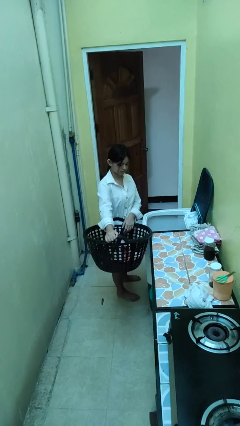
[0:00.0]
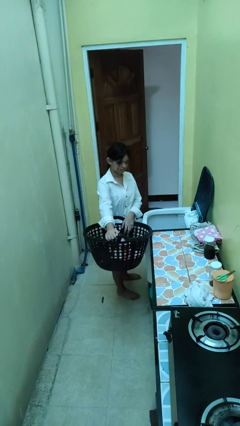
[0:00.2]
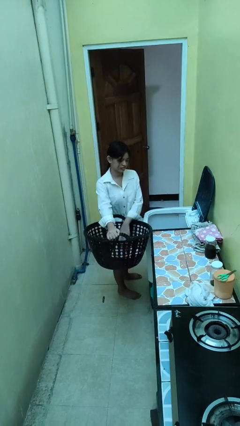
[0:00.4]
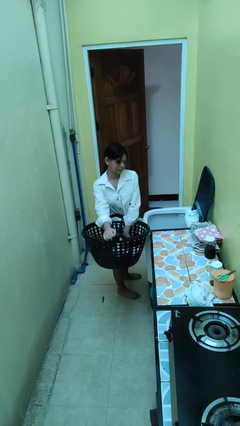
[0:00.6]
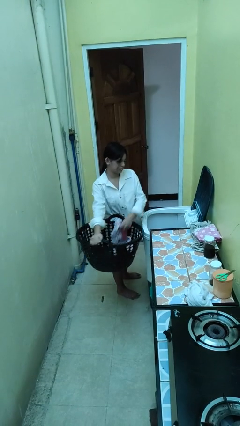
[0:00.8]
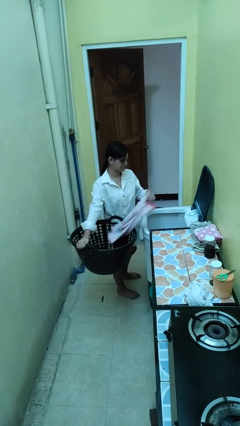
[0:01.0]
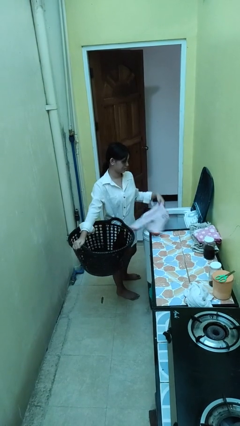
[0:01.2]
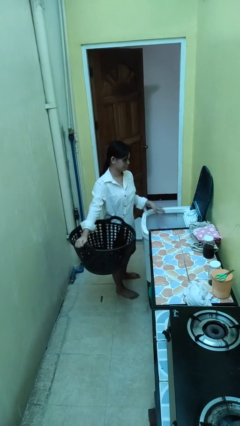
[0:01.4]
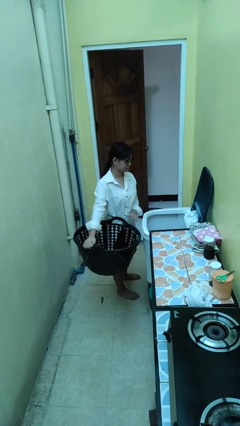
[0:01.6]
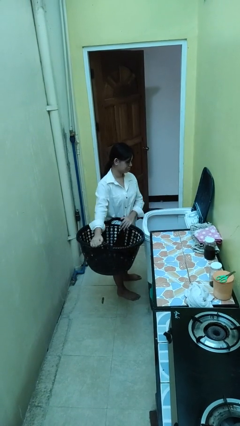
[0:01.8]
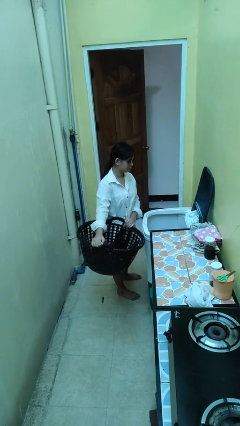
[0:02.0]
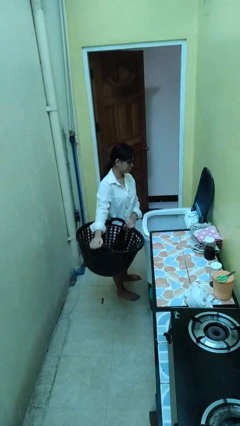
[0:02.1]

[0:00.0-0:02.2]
person loads clotheswasher

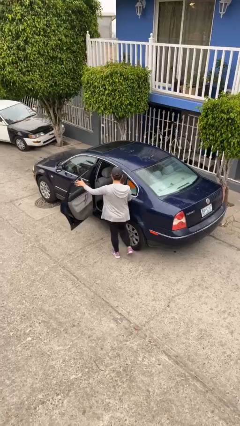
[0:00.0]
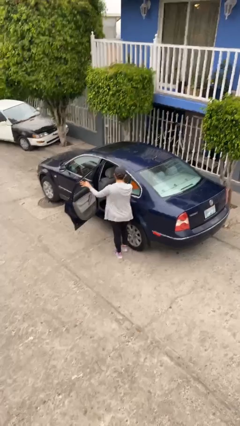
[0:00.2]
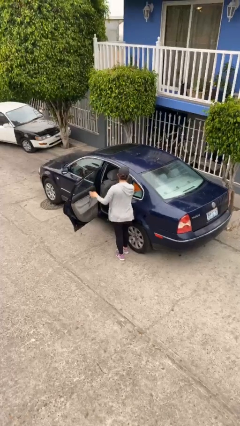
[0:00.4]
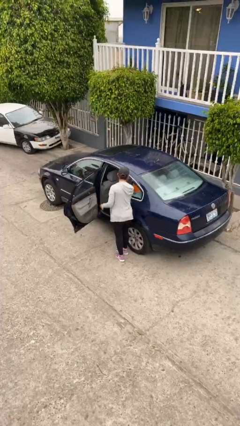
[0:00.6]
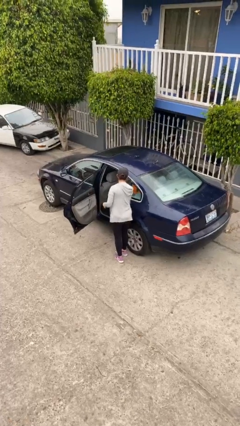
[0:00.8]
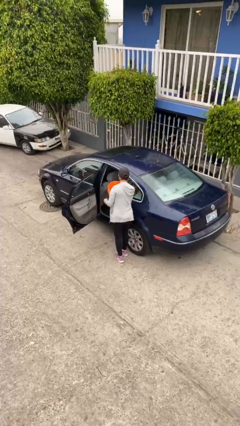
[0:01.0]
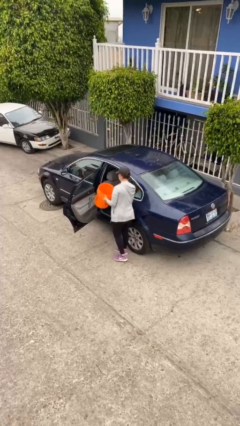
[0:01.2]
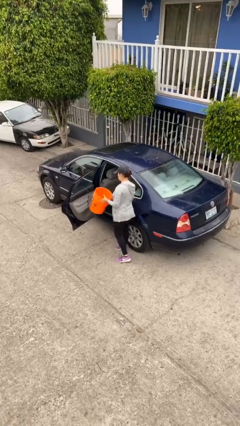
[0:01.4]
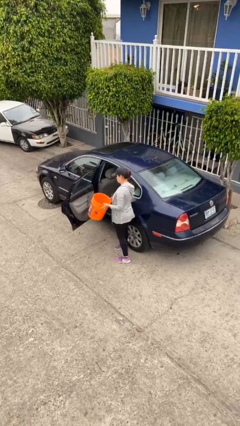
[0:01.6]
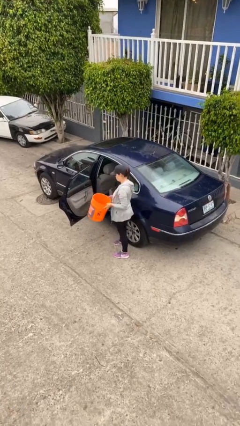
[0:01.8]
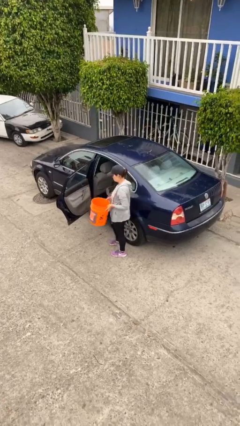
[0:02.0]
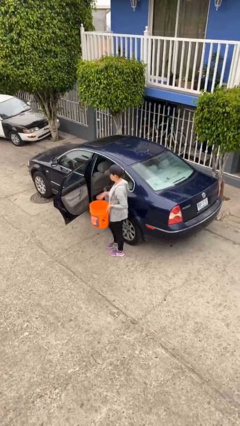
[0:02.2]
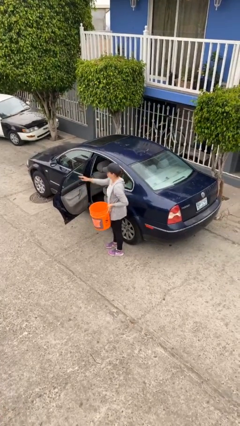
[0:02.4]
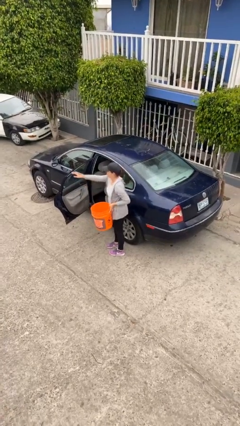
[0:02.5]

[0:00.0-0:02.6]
person unloads car

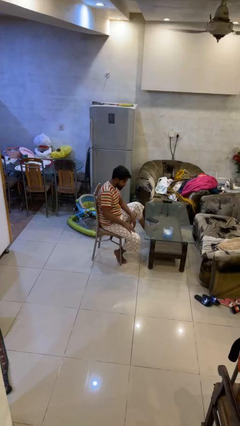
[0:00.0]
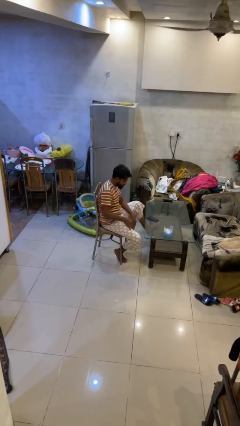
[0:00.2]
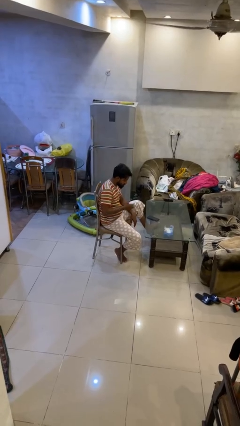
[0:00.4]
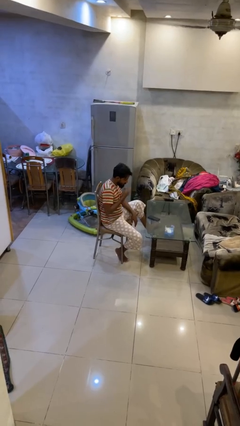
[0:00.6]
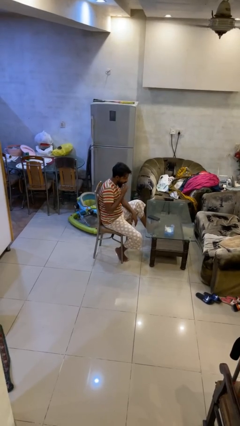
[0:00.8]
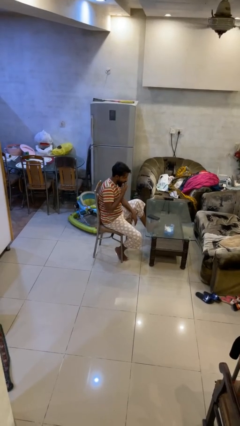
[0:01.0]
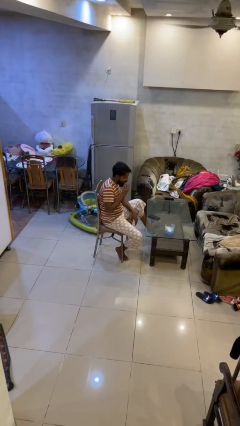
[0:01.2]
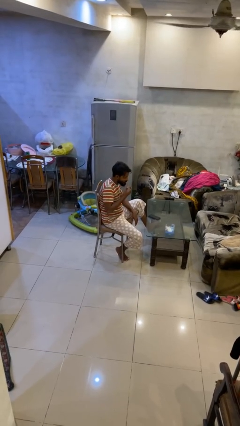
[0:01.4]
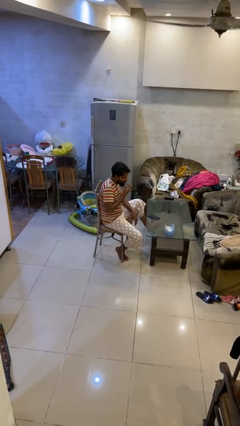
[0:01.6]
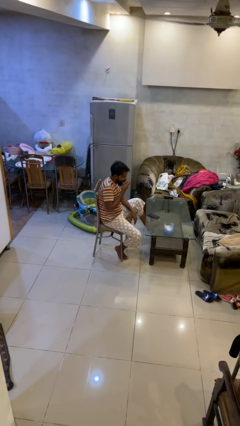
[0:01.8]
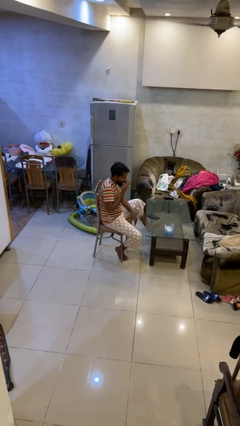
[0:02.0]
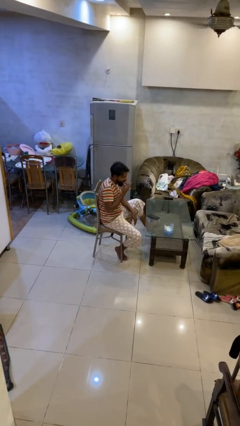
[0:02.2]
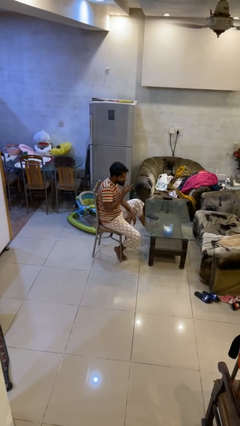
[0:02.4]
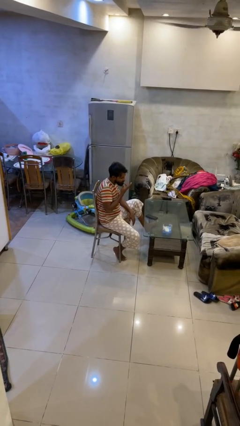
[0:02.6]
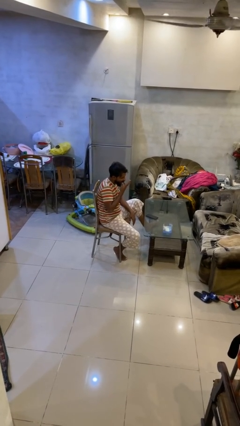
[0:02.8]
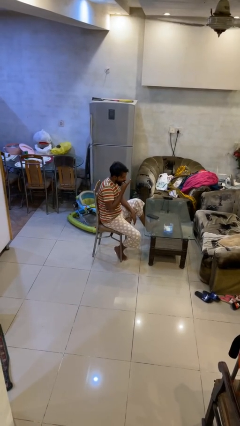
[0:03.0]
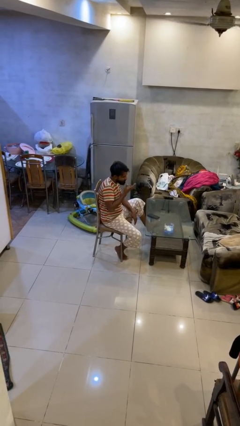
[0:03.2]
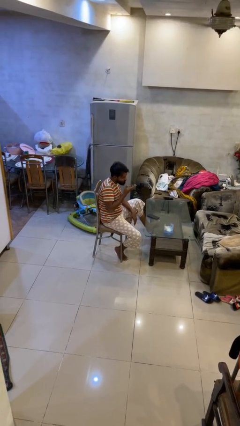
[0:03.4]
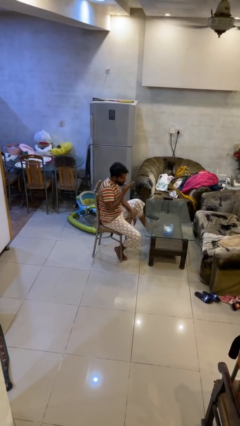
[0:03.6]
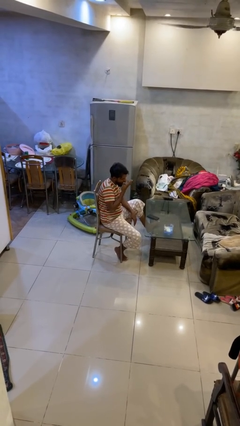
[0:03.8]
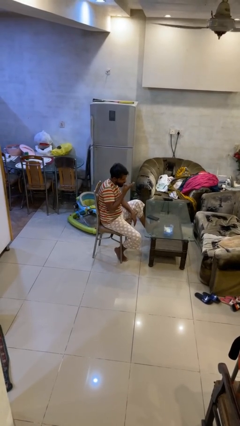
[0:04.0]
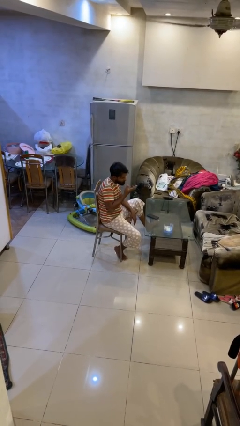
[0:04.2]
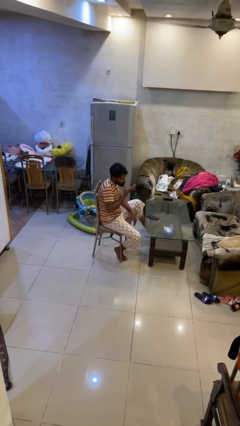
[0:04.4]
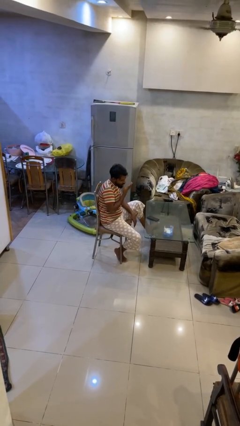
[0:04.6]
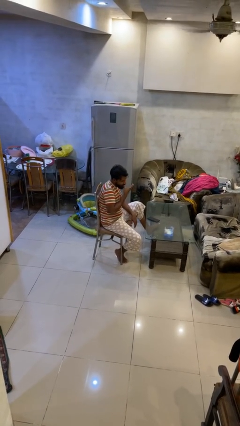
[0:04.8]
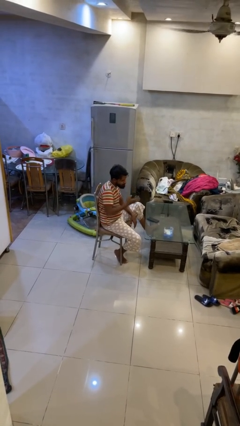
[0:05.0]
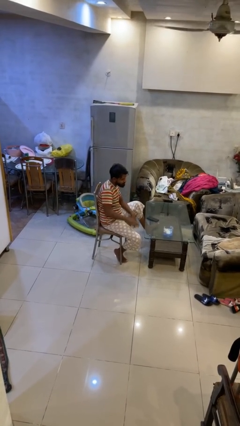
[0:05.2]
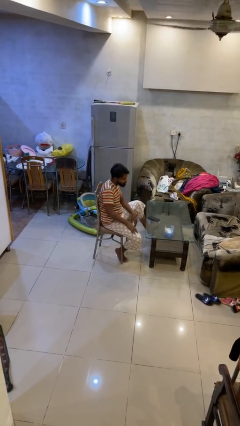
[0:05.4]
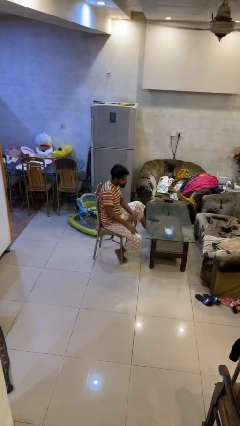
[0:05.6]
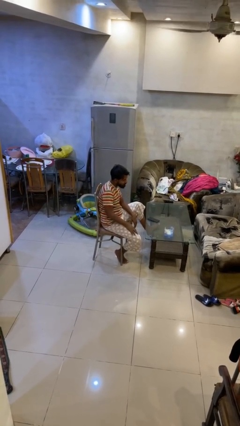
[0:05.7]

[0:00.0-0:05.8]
person licks fingers

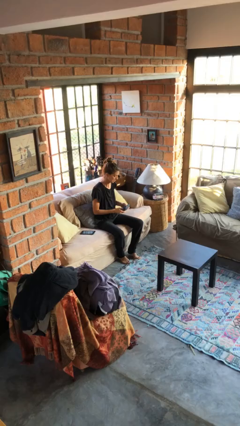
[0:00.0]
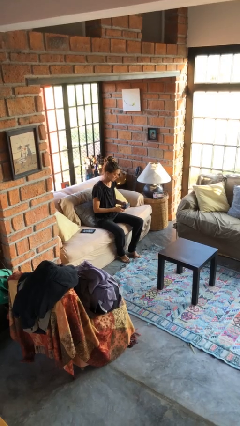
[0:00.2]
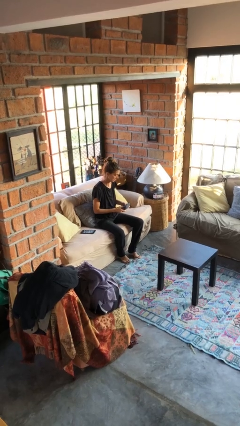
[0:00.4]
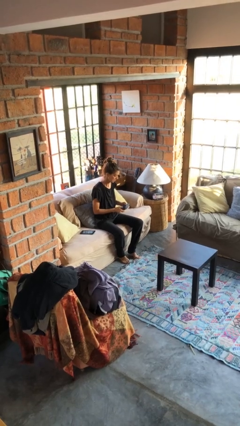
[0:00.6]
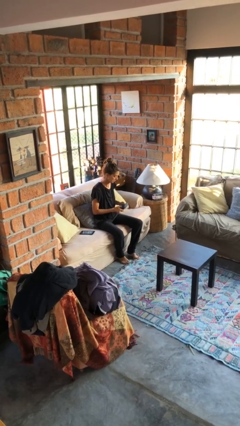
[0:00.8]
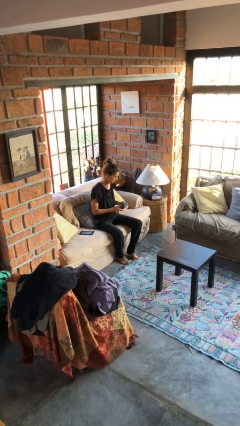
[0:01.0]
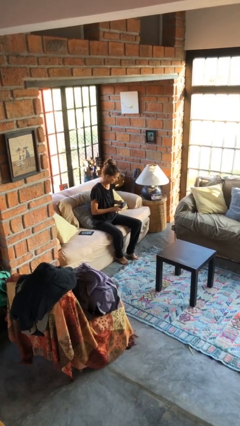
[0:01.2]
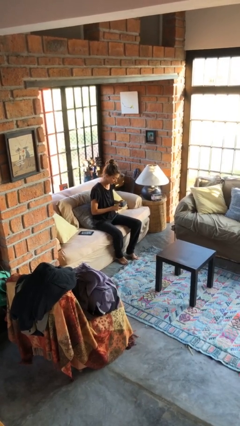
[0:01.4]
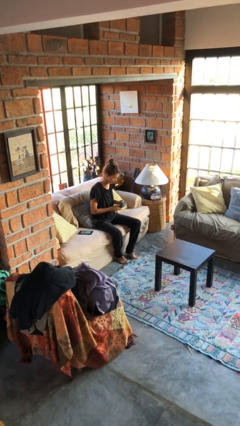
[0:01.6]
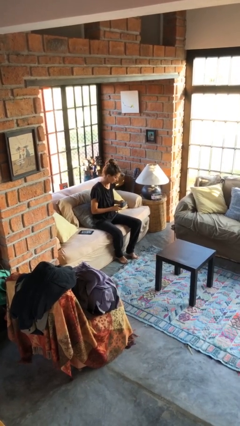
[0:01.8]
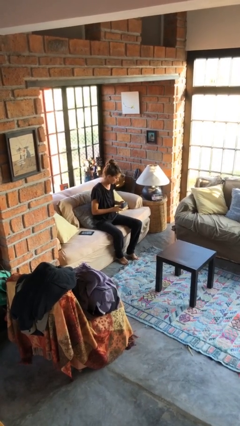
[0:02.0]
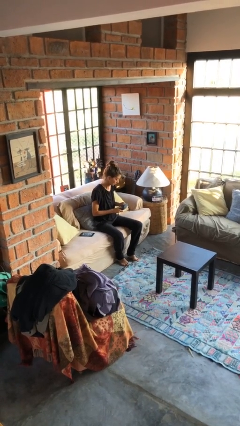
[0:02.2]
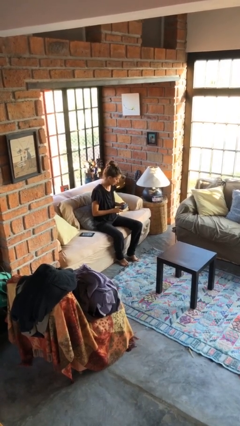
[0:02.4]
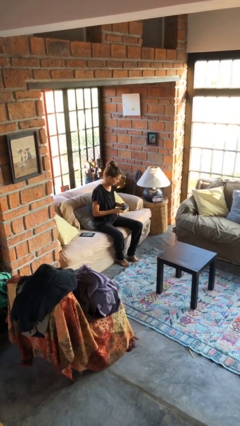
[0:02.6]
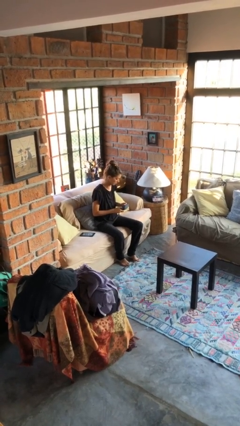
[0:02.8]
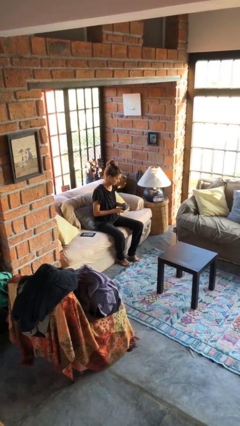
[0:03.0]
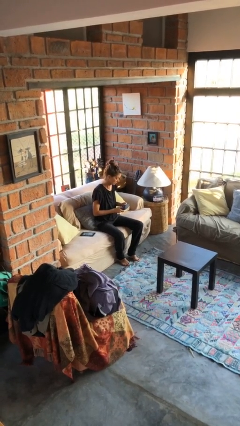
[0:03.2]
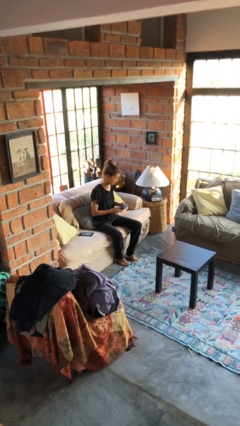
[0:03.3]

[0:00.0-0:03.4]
person interacts with handheld game

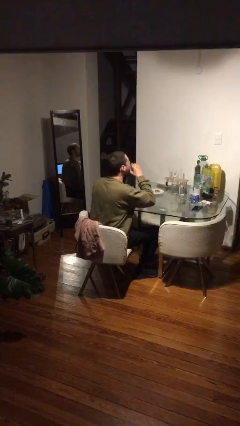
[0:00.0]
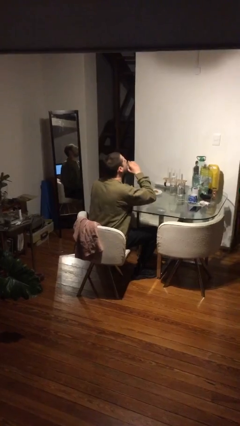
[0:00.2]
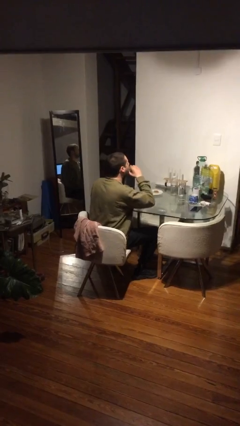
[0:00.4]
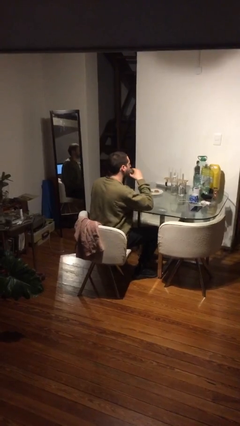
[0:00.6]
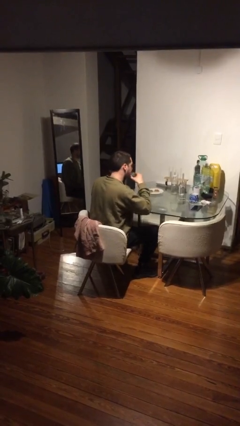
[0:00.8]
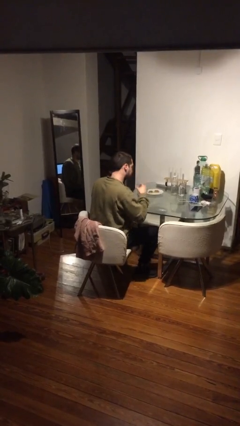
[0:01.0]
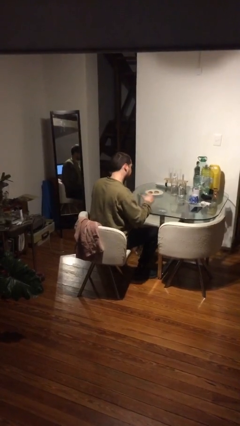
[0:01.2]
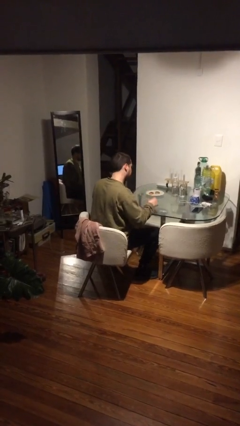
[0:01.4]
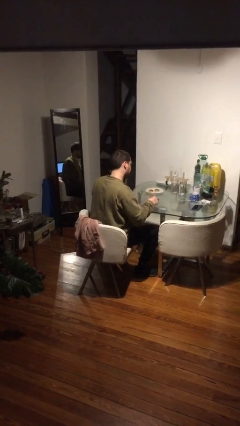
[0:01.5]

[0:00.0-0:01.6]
person drinks from shotglass

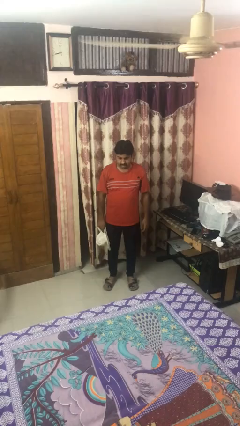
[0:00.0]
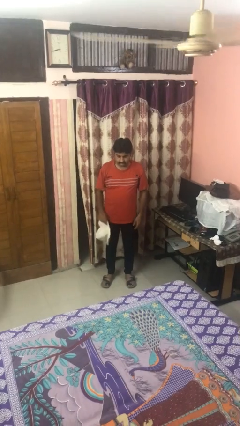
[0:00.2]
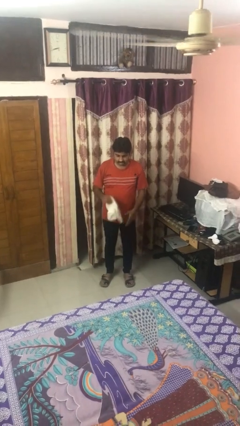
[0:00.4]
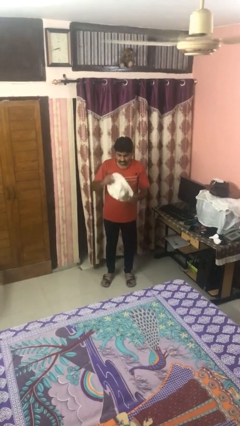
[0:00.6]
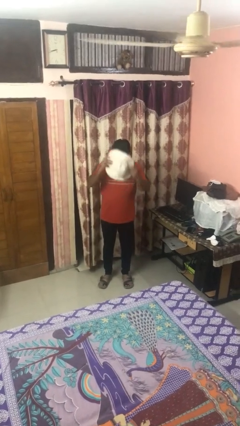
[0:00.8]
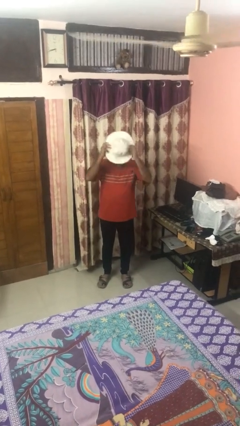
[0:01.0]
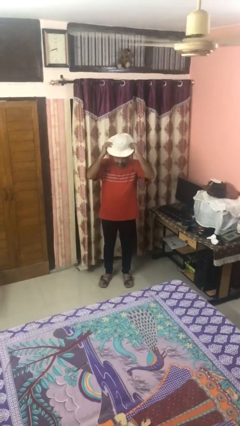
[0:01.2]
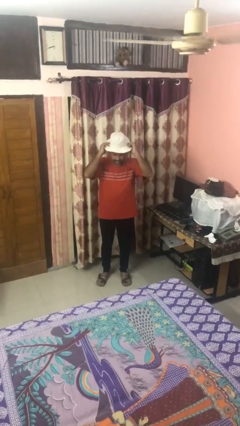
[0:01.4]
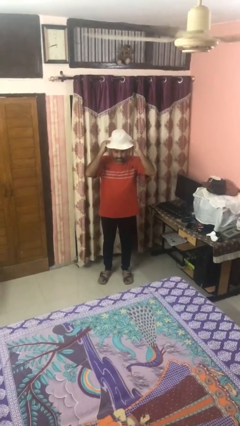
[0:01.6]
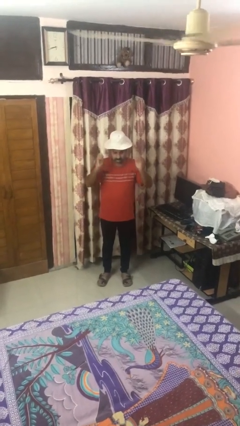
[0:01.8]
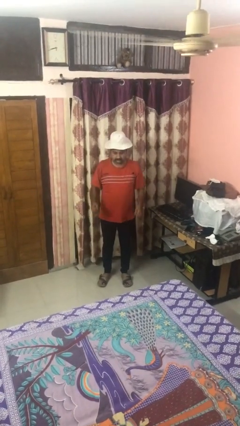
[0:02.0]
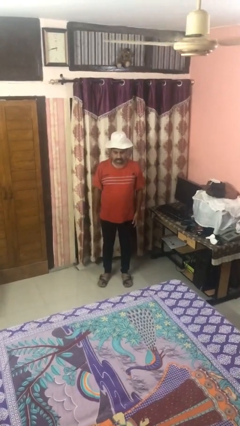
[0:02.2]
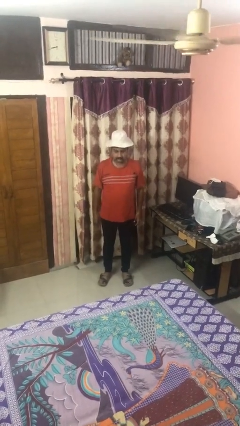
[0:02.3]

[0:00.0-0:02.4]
person puts on hat
